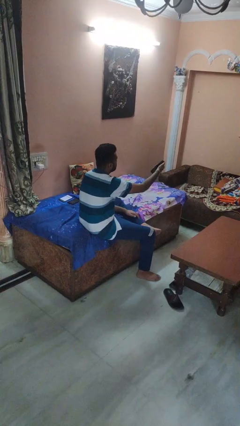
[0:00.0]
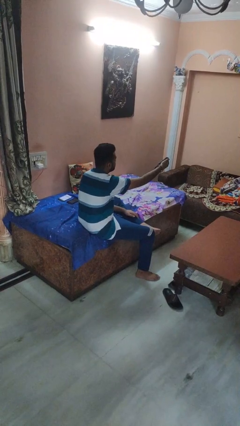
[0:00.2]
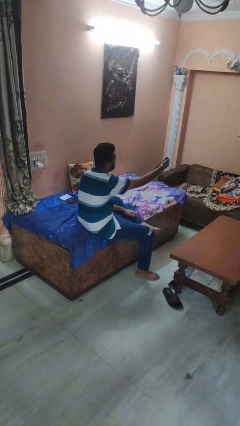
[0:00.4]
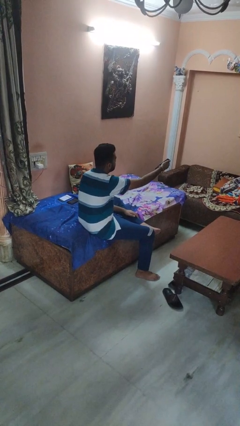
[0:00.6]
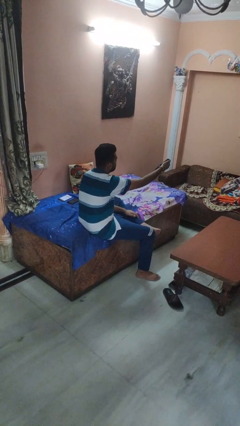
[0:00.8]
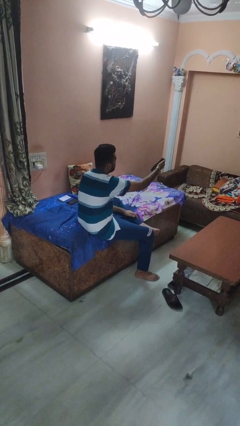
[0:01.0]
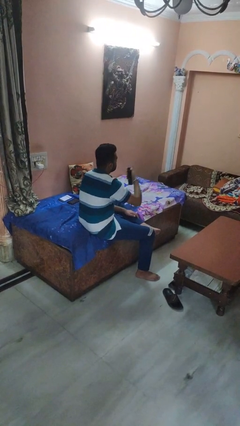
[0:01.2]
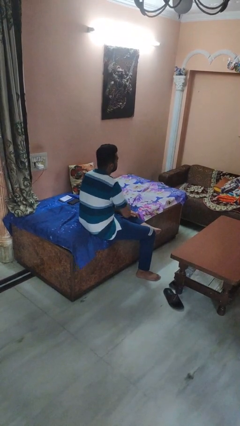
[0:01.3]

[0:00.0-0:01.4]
person uses television remote

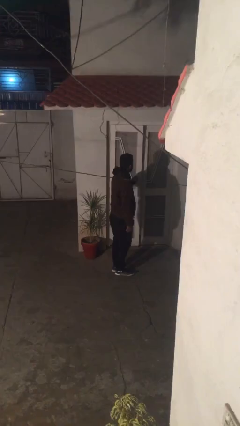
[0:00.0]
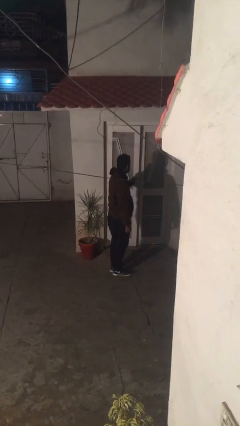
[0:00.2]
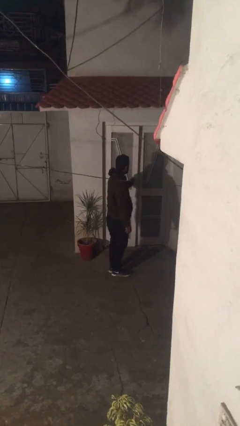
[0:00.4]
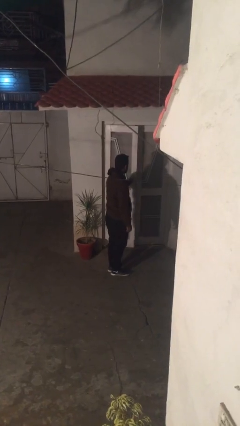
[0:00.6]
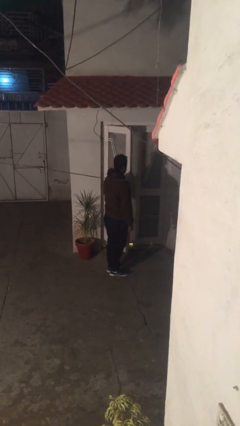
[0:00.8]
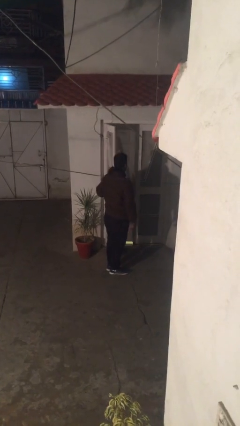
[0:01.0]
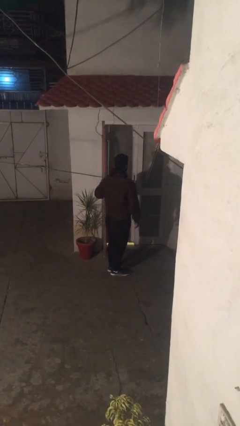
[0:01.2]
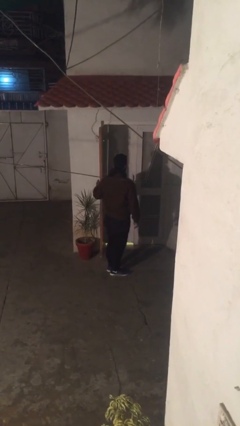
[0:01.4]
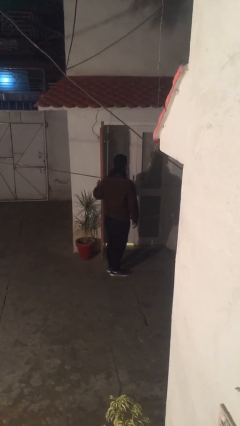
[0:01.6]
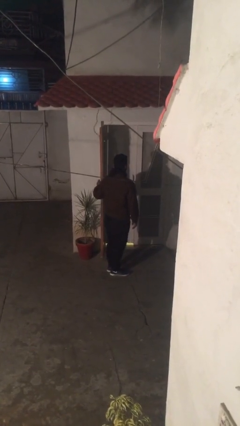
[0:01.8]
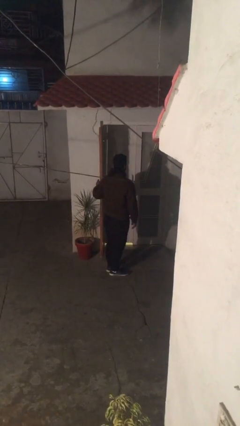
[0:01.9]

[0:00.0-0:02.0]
person opens facility door

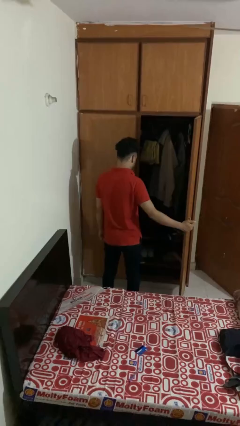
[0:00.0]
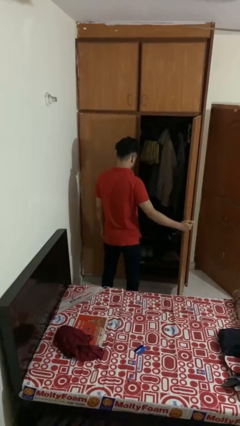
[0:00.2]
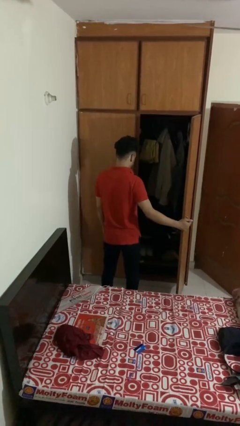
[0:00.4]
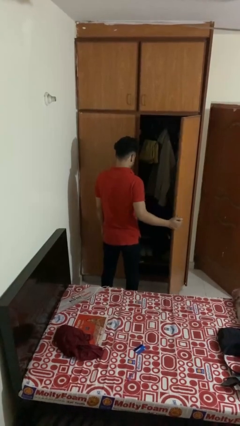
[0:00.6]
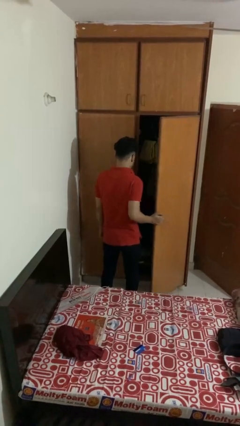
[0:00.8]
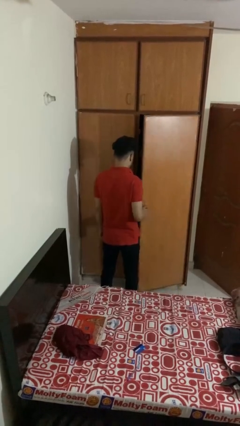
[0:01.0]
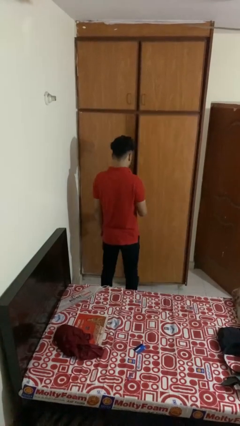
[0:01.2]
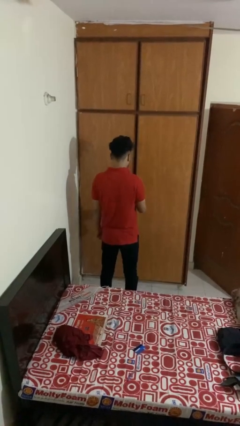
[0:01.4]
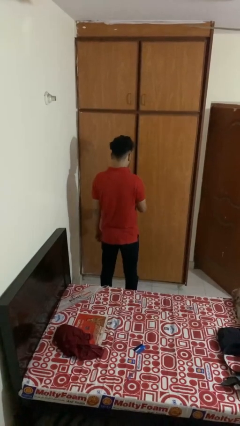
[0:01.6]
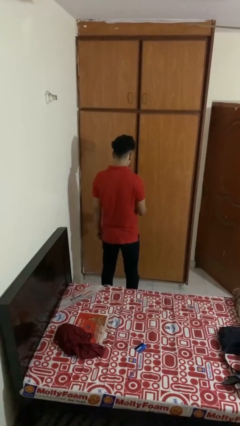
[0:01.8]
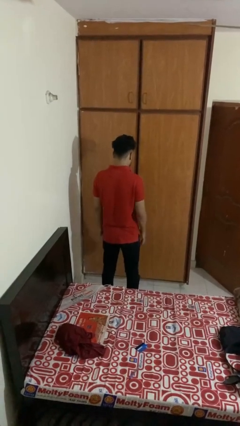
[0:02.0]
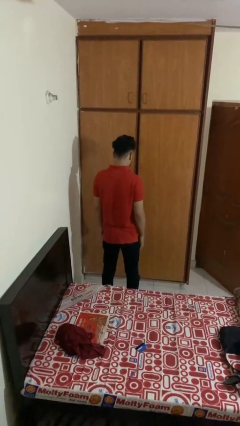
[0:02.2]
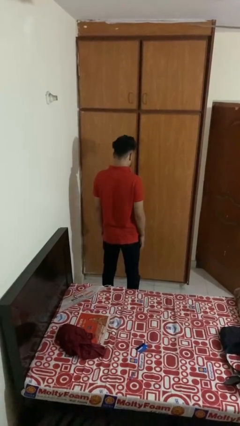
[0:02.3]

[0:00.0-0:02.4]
person closes closet door

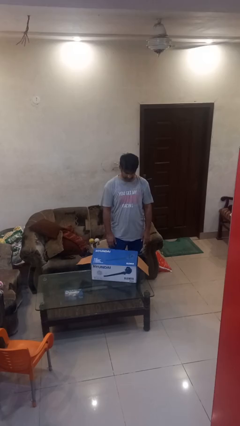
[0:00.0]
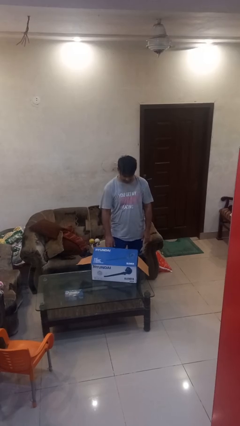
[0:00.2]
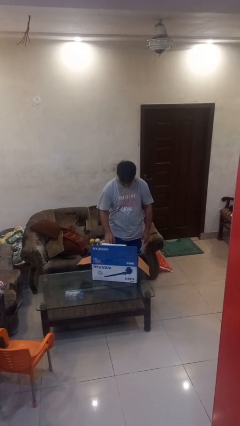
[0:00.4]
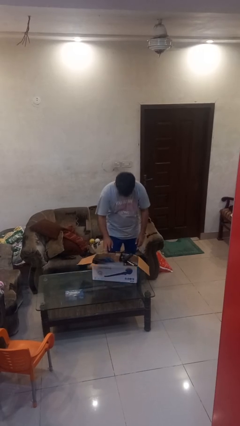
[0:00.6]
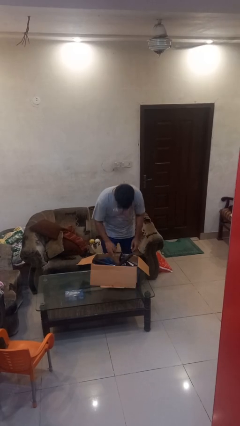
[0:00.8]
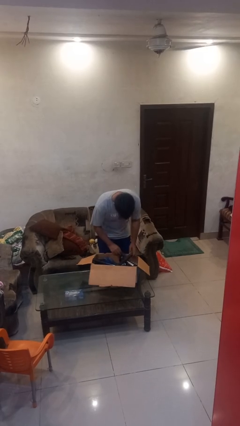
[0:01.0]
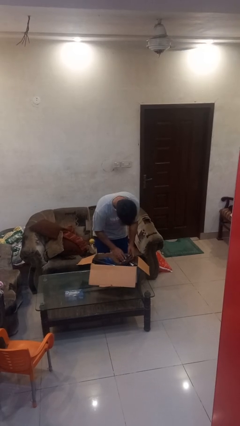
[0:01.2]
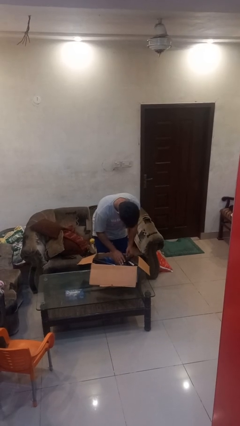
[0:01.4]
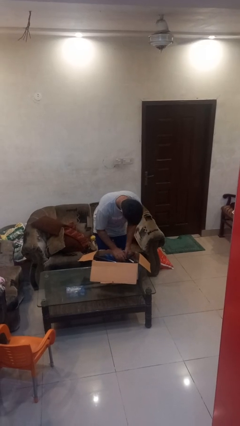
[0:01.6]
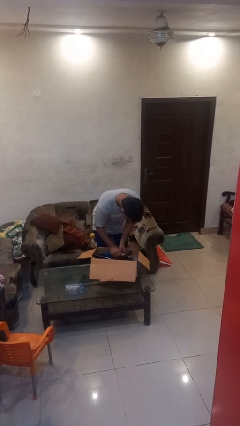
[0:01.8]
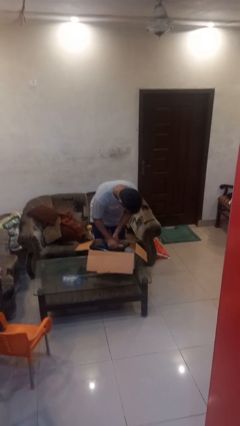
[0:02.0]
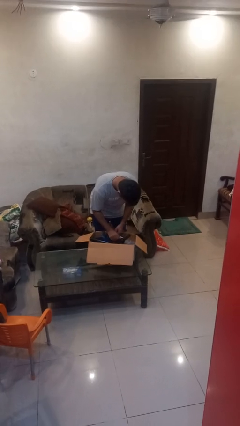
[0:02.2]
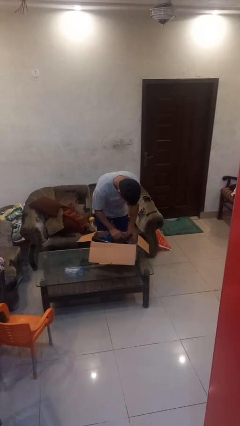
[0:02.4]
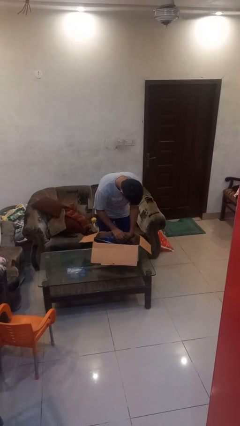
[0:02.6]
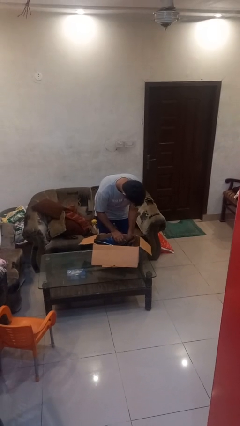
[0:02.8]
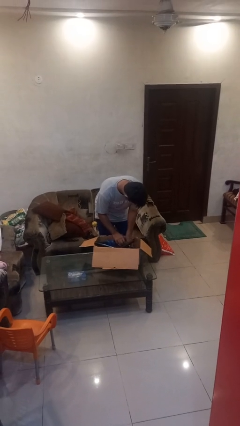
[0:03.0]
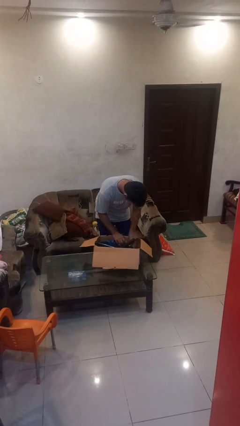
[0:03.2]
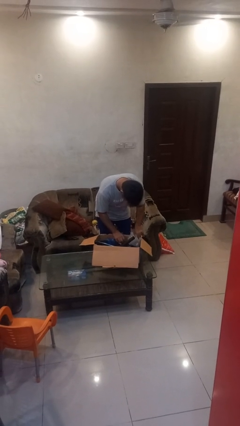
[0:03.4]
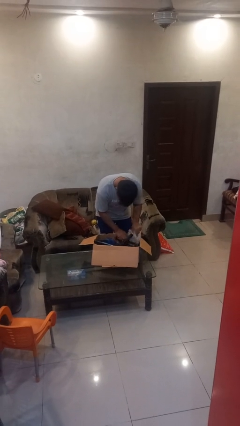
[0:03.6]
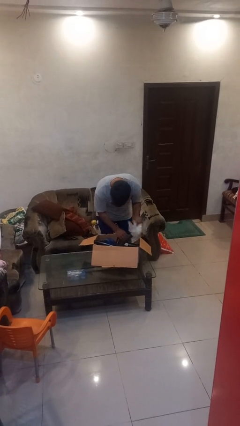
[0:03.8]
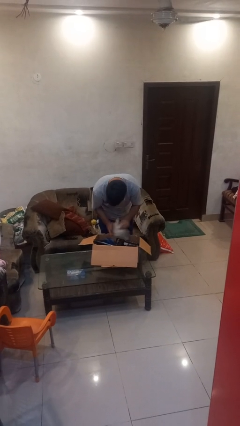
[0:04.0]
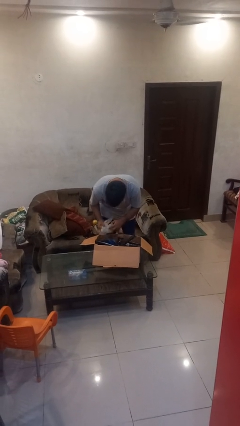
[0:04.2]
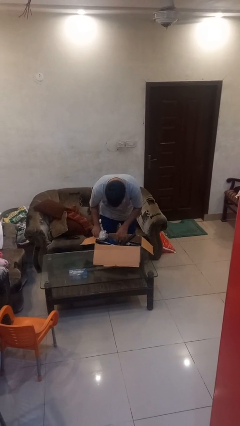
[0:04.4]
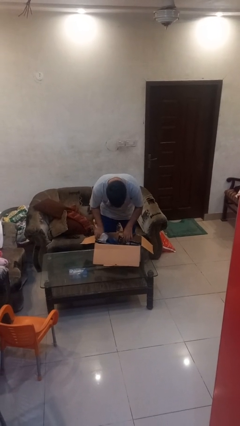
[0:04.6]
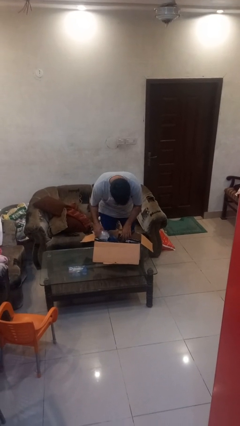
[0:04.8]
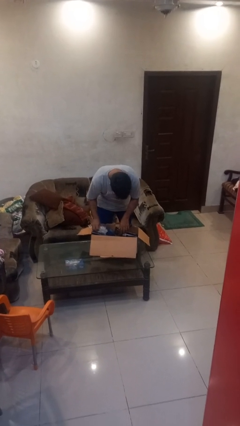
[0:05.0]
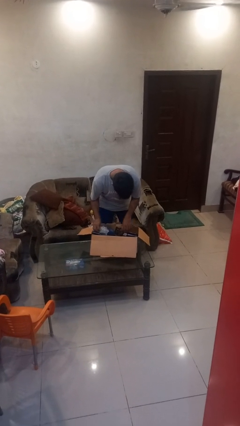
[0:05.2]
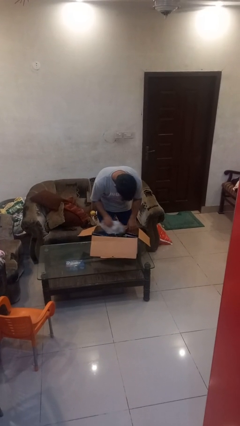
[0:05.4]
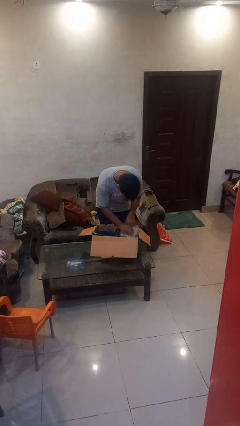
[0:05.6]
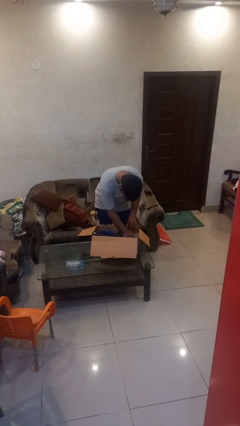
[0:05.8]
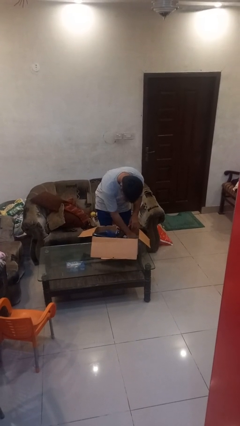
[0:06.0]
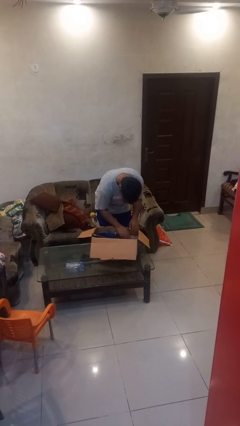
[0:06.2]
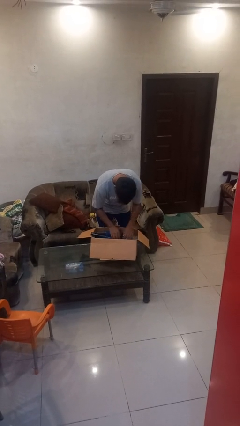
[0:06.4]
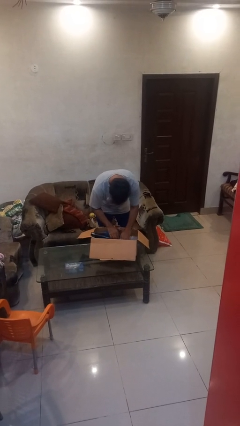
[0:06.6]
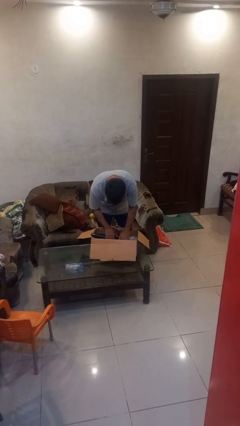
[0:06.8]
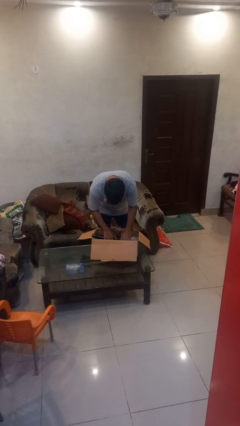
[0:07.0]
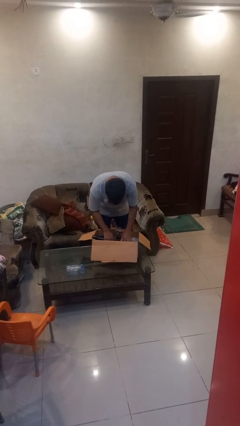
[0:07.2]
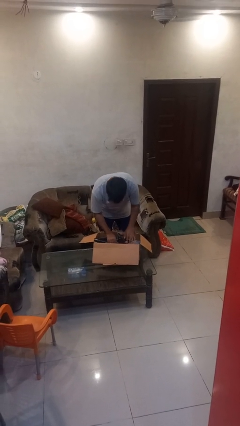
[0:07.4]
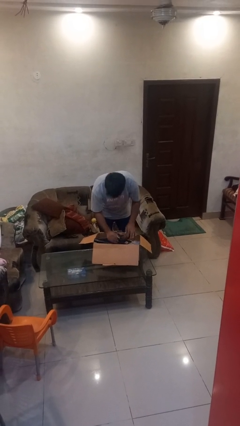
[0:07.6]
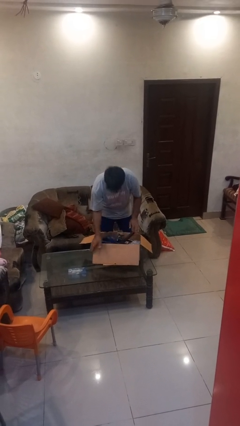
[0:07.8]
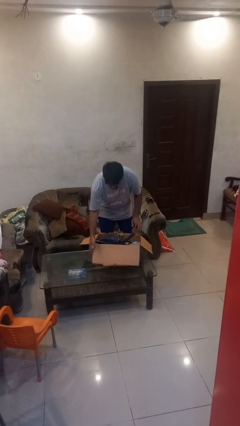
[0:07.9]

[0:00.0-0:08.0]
person searches in box

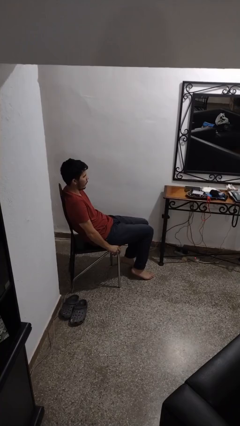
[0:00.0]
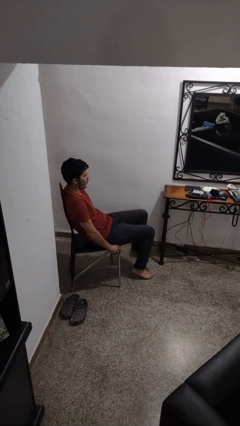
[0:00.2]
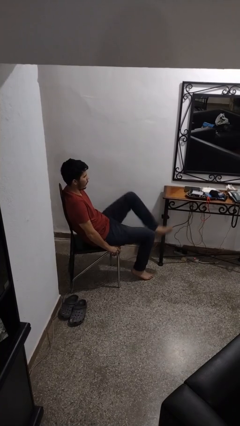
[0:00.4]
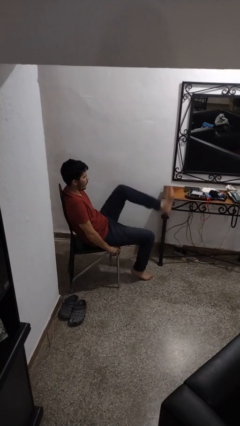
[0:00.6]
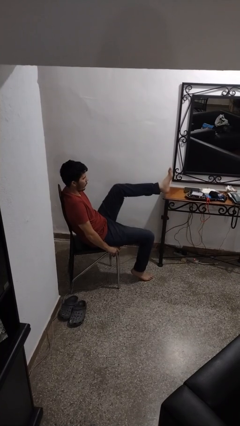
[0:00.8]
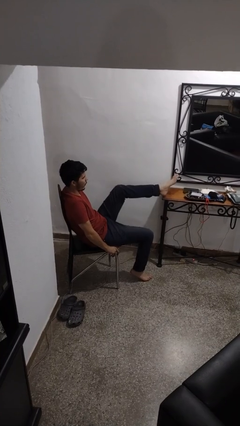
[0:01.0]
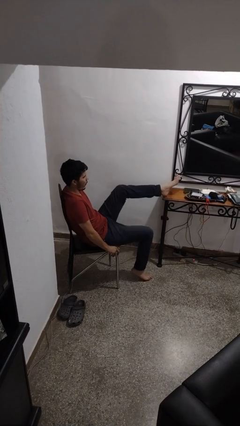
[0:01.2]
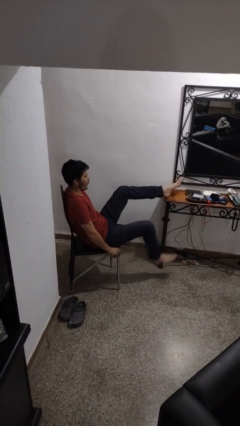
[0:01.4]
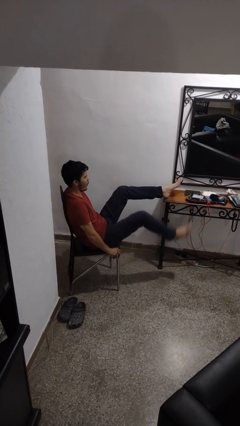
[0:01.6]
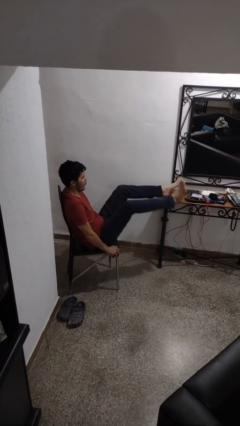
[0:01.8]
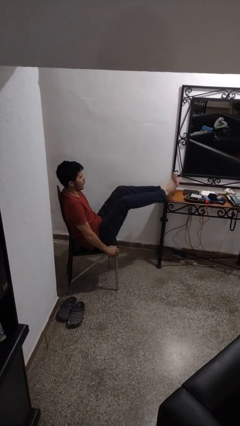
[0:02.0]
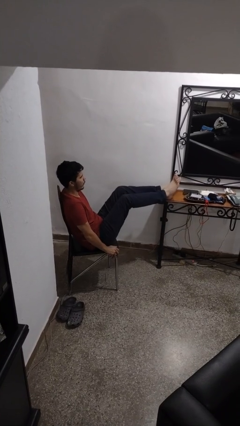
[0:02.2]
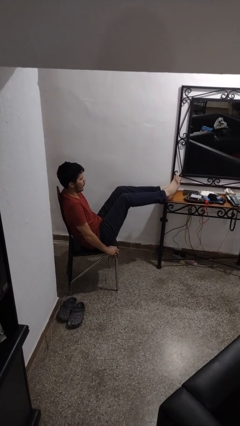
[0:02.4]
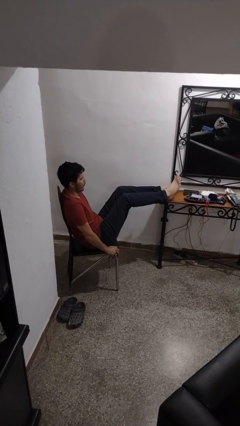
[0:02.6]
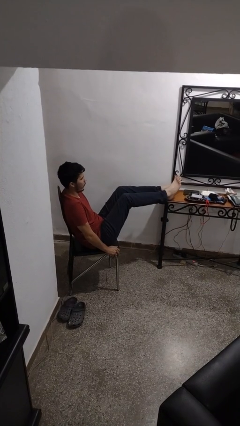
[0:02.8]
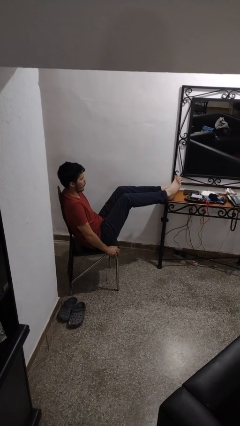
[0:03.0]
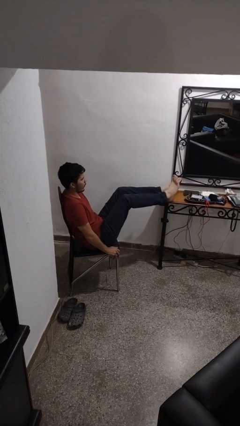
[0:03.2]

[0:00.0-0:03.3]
person puts feet up

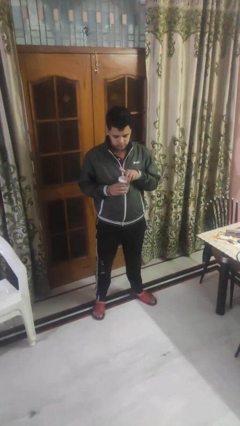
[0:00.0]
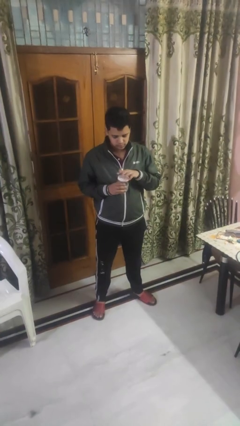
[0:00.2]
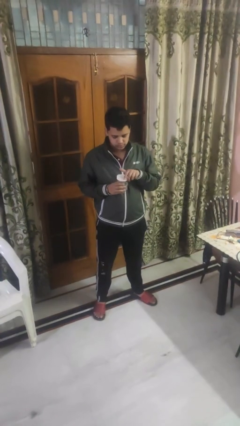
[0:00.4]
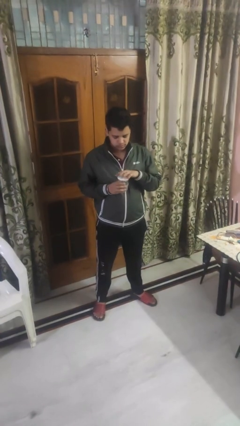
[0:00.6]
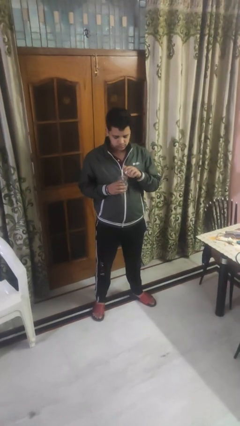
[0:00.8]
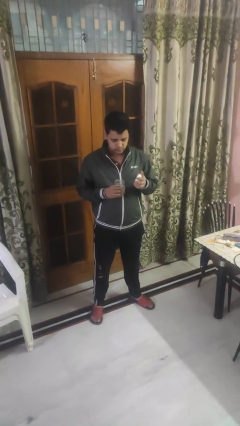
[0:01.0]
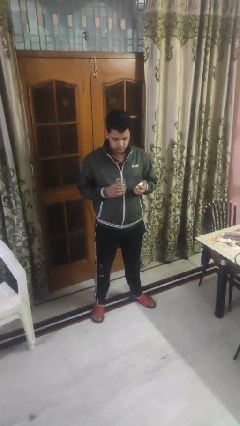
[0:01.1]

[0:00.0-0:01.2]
person opens jar
